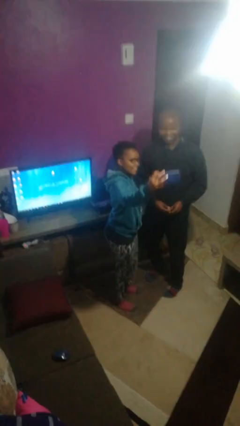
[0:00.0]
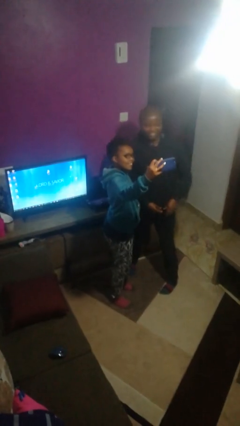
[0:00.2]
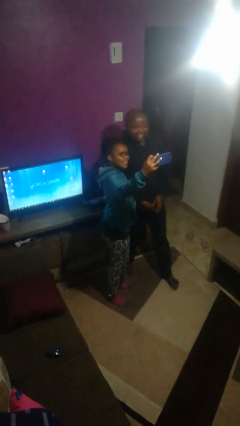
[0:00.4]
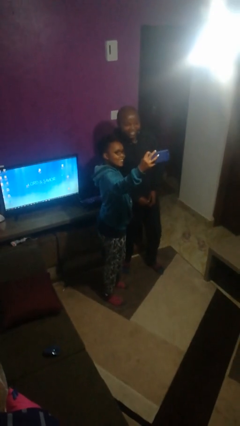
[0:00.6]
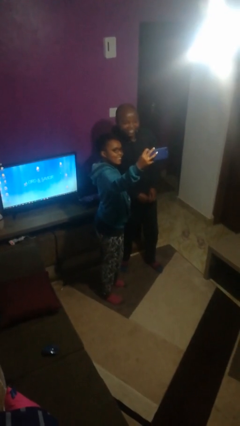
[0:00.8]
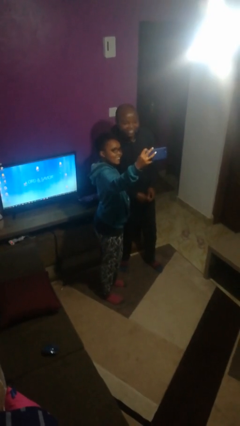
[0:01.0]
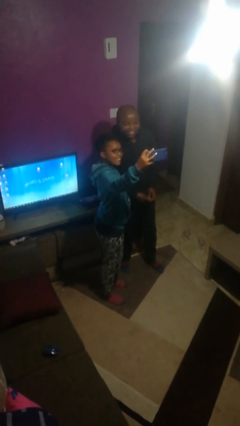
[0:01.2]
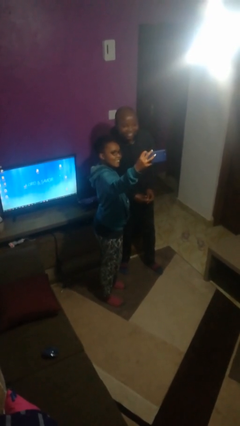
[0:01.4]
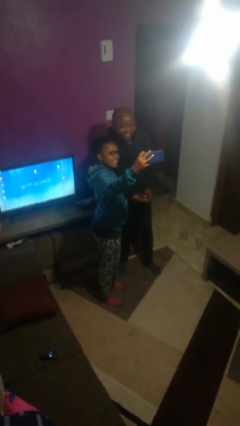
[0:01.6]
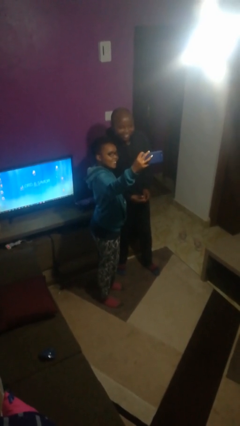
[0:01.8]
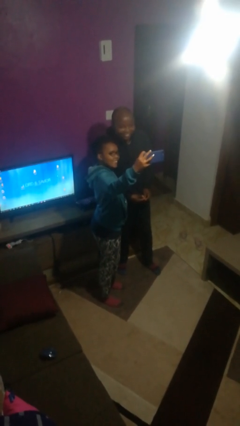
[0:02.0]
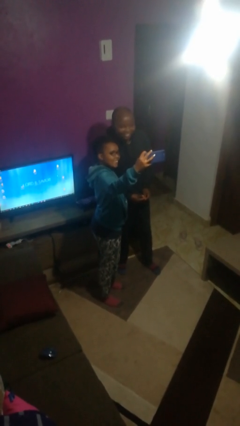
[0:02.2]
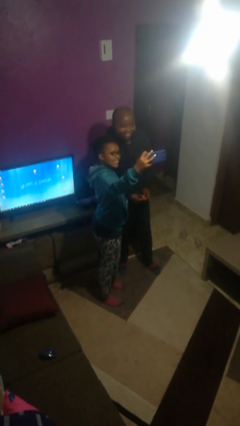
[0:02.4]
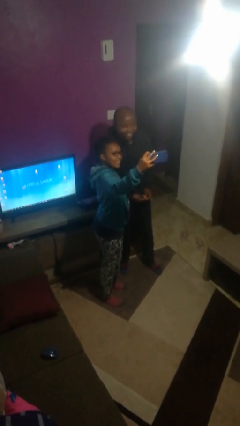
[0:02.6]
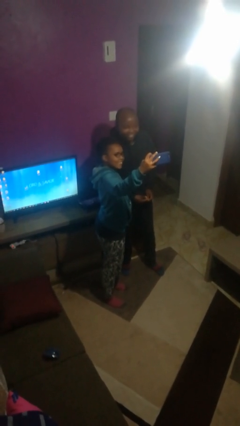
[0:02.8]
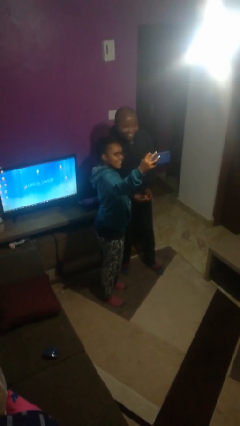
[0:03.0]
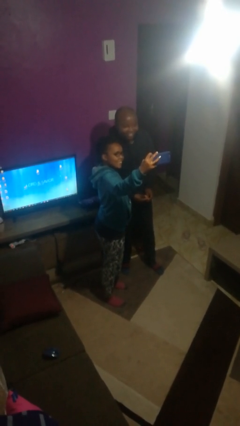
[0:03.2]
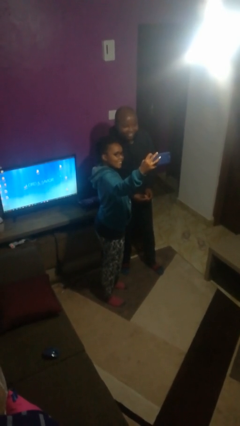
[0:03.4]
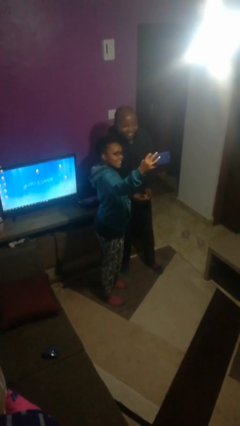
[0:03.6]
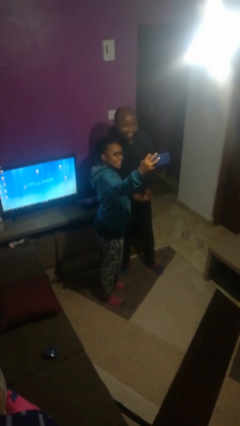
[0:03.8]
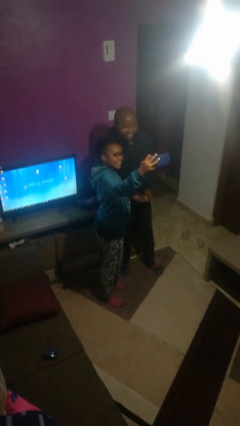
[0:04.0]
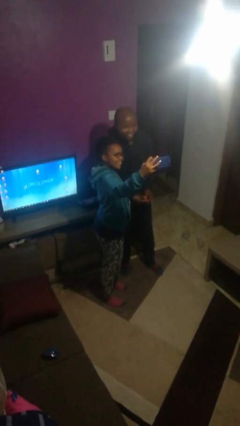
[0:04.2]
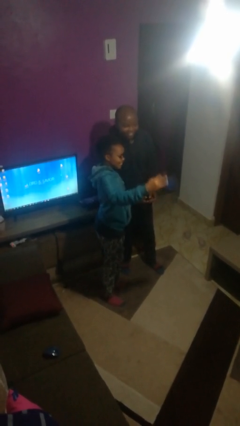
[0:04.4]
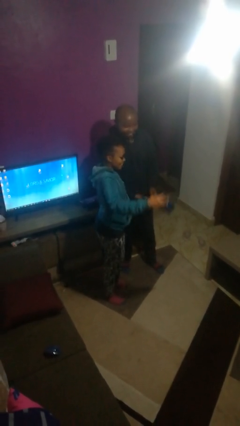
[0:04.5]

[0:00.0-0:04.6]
person takes selfie with person

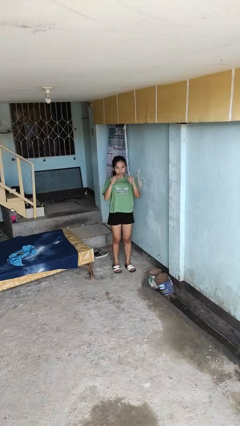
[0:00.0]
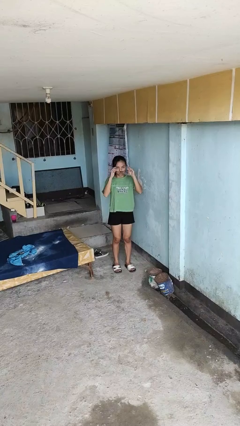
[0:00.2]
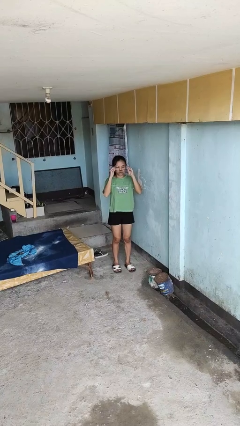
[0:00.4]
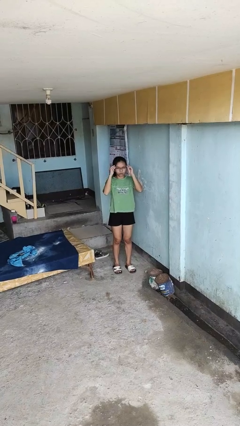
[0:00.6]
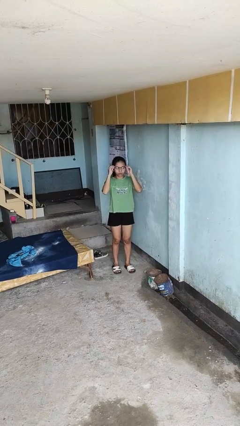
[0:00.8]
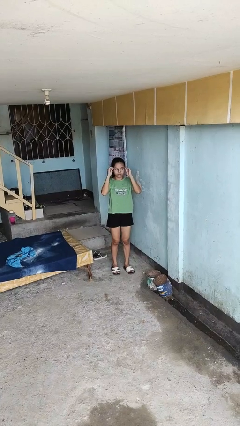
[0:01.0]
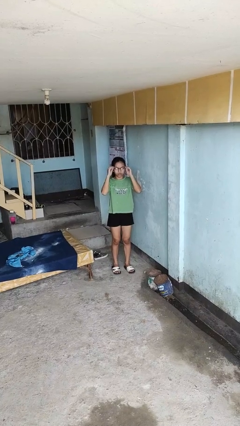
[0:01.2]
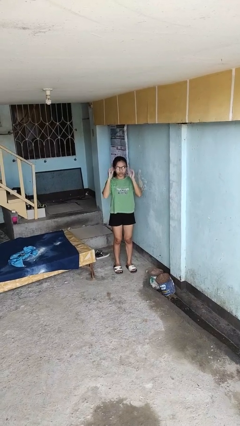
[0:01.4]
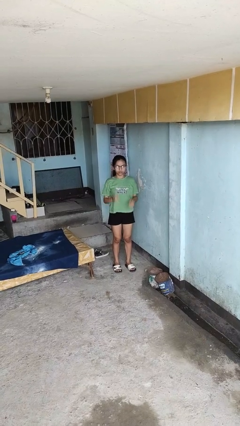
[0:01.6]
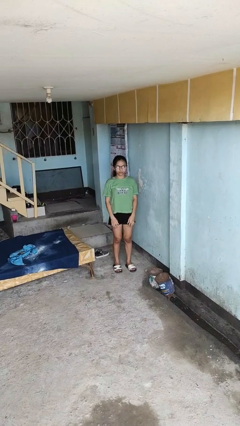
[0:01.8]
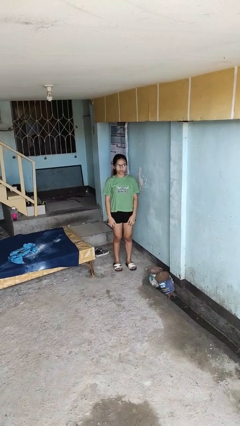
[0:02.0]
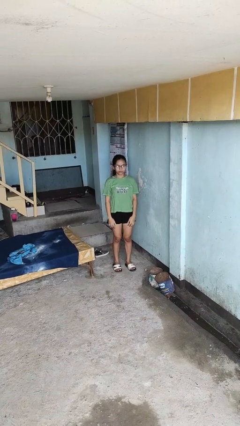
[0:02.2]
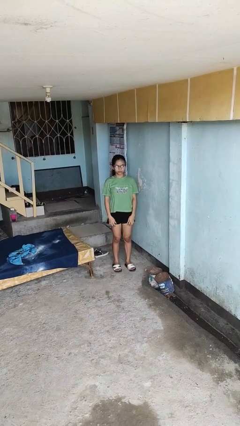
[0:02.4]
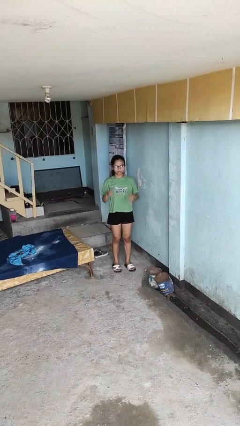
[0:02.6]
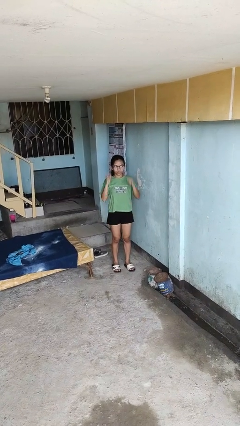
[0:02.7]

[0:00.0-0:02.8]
person puts on glasses

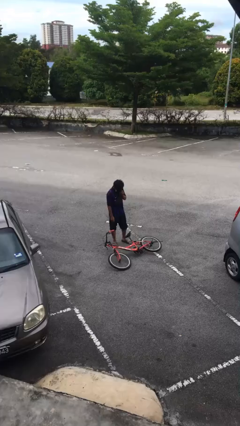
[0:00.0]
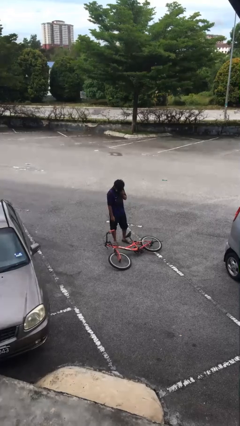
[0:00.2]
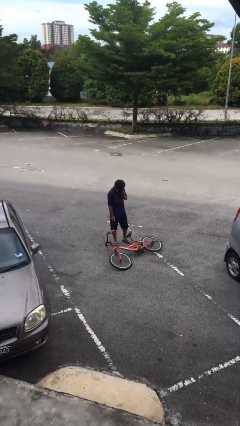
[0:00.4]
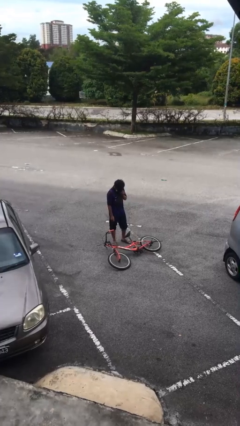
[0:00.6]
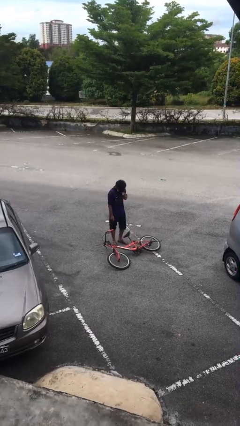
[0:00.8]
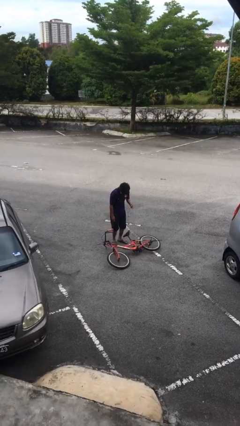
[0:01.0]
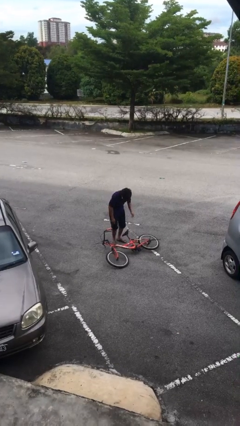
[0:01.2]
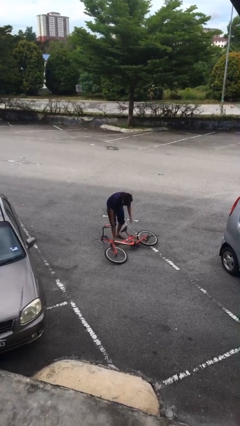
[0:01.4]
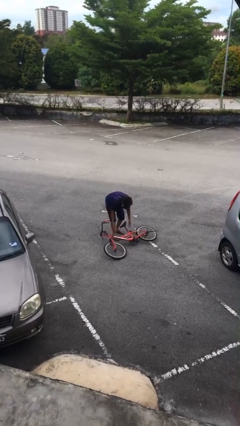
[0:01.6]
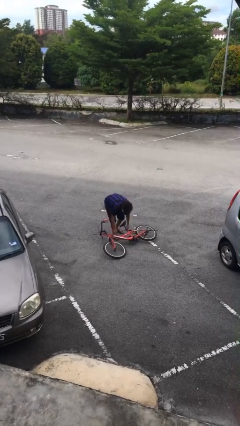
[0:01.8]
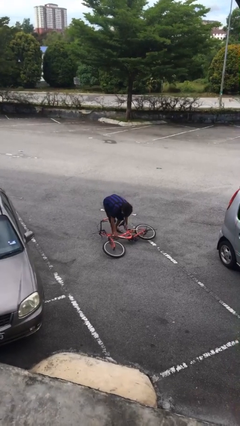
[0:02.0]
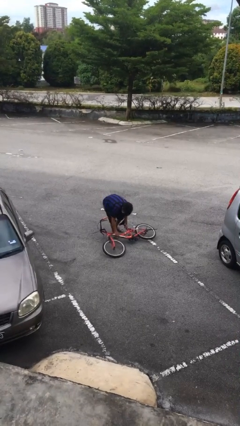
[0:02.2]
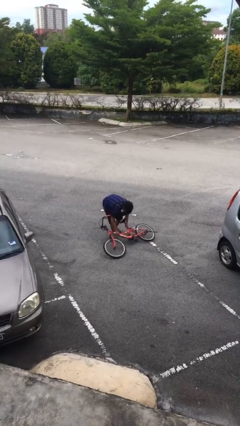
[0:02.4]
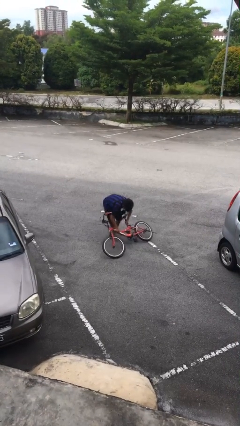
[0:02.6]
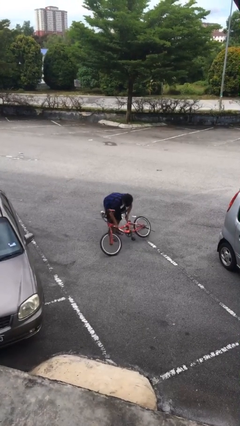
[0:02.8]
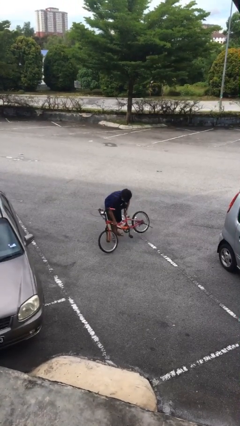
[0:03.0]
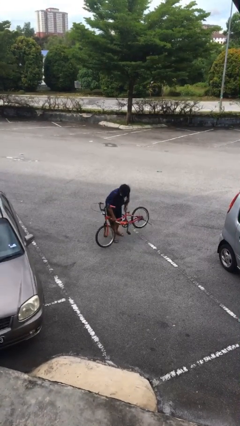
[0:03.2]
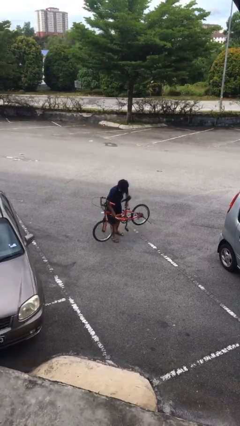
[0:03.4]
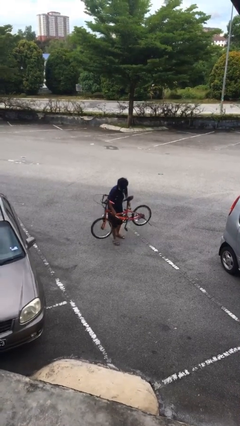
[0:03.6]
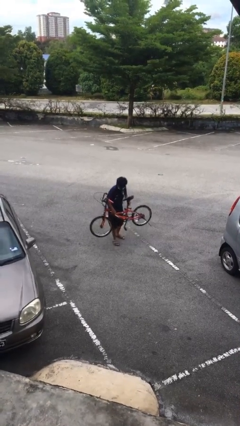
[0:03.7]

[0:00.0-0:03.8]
person picks up object from floor

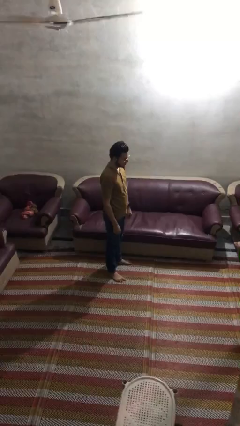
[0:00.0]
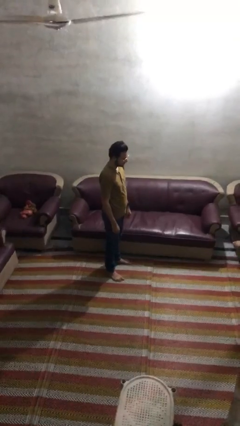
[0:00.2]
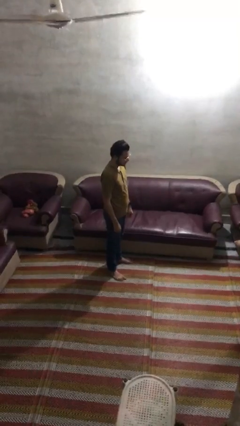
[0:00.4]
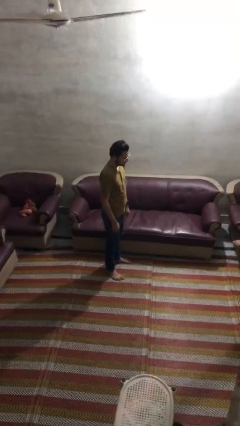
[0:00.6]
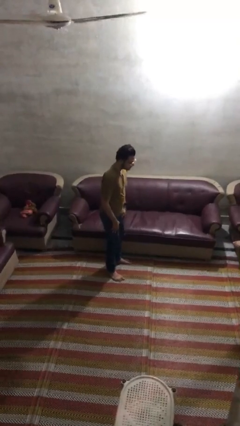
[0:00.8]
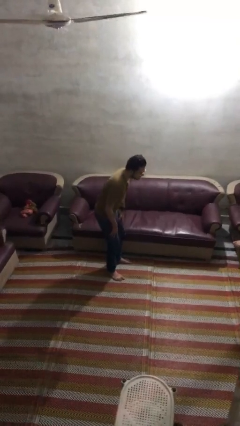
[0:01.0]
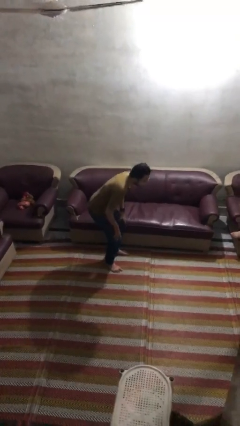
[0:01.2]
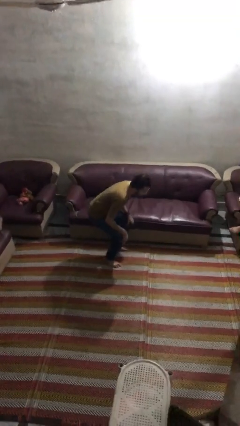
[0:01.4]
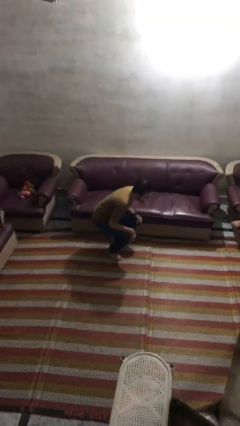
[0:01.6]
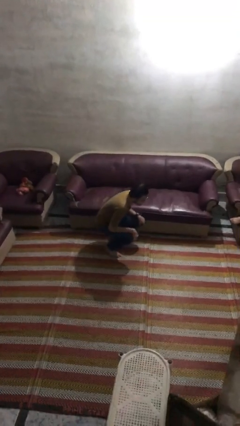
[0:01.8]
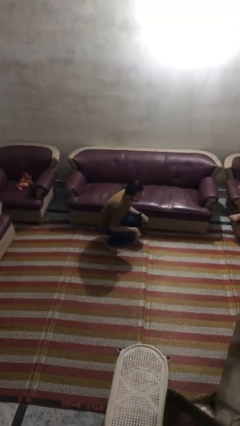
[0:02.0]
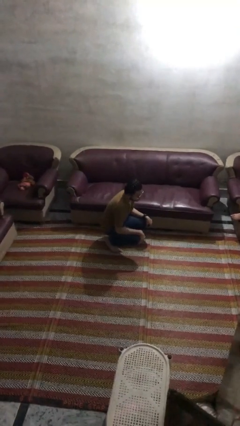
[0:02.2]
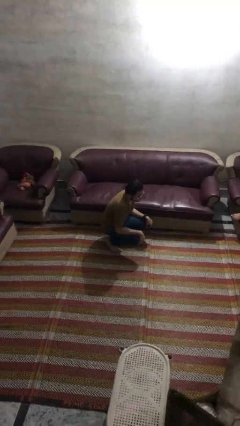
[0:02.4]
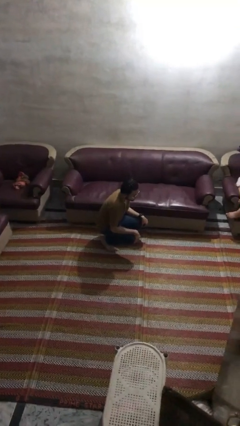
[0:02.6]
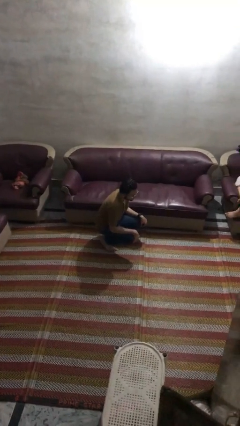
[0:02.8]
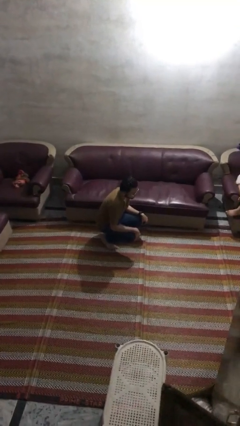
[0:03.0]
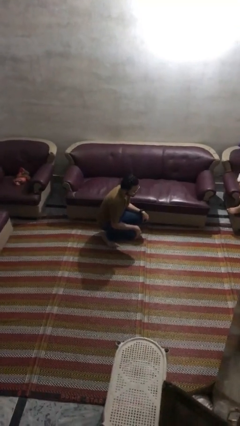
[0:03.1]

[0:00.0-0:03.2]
person squats

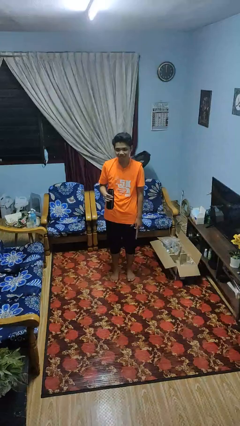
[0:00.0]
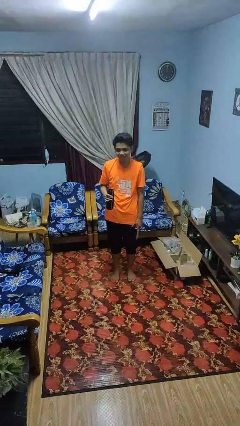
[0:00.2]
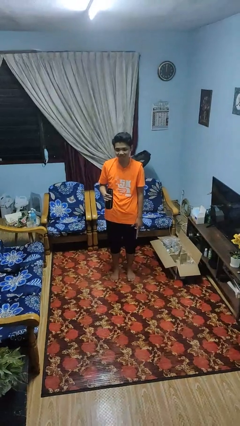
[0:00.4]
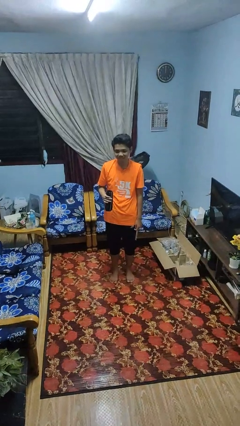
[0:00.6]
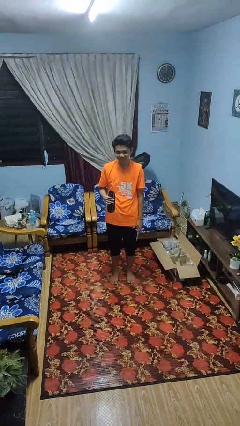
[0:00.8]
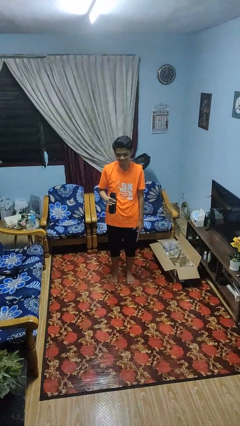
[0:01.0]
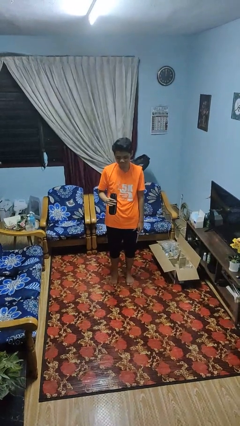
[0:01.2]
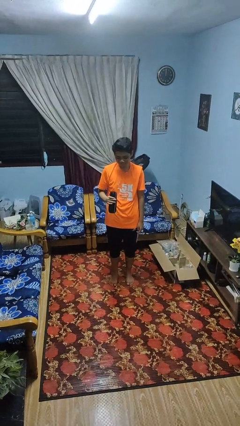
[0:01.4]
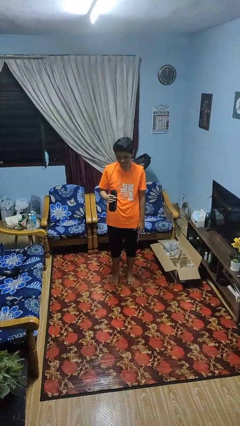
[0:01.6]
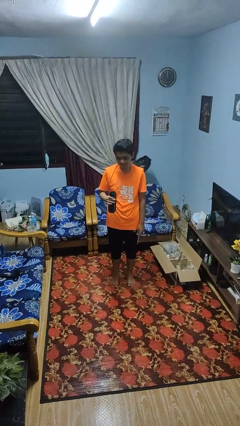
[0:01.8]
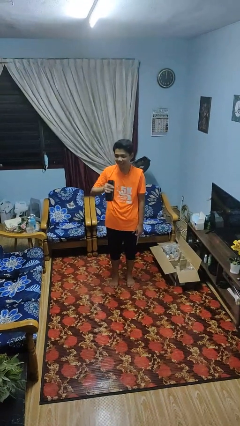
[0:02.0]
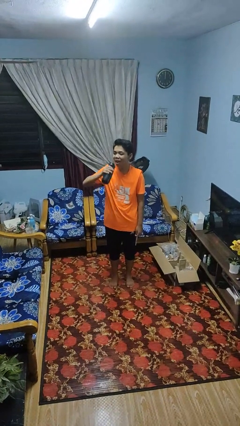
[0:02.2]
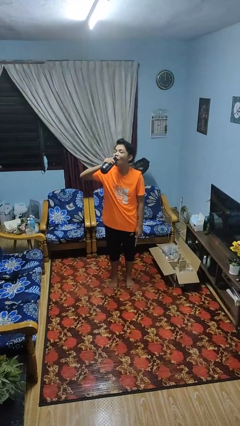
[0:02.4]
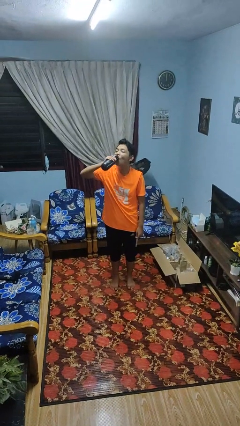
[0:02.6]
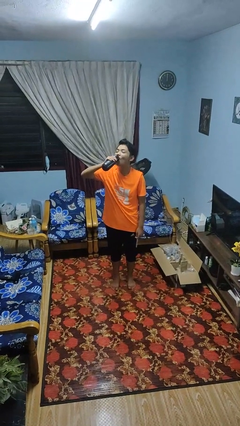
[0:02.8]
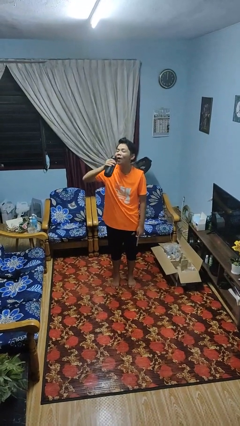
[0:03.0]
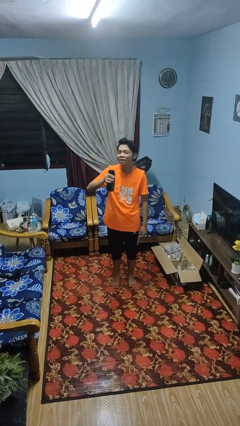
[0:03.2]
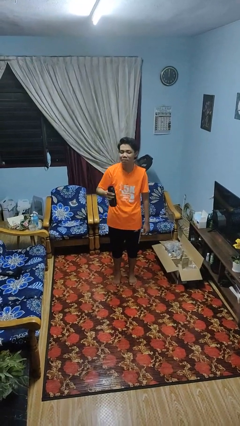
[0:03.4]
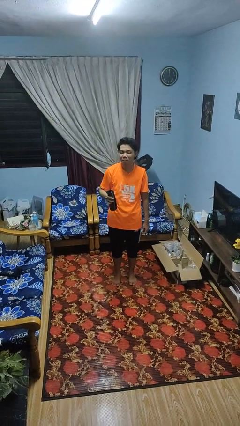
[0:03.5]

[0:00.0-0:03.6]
person drinks from bottle
